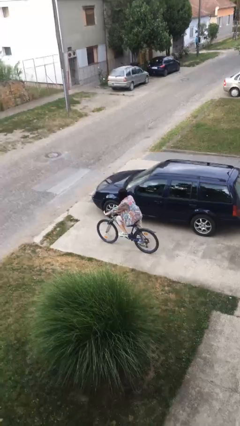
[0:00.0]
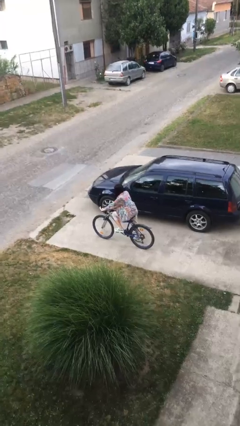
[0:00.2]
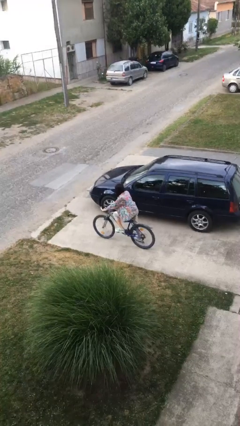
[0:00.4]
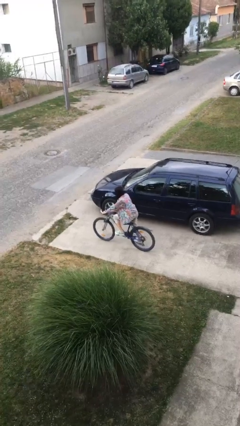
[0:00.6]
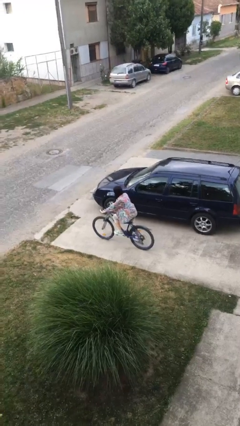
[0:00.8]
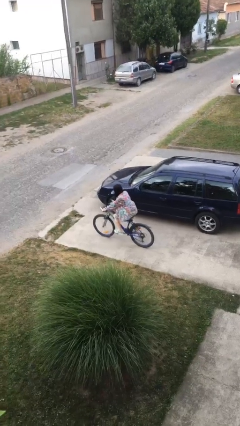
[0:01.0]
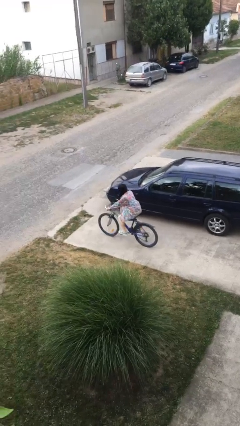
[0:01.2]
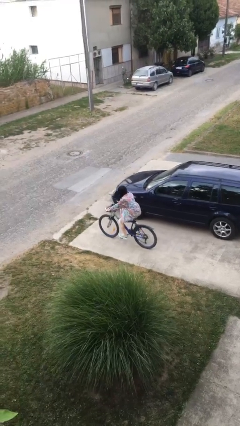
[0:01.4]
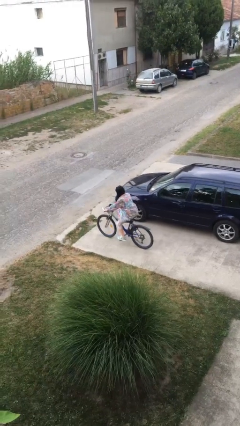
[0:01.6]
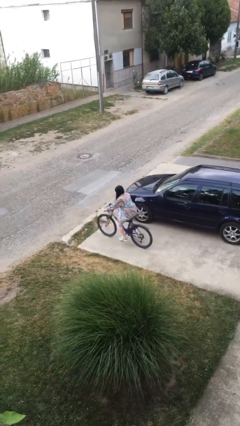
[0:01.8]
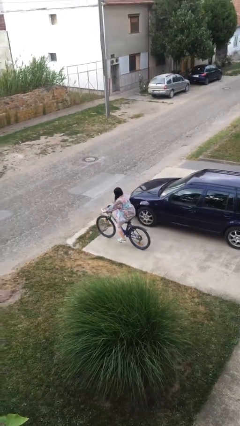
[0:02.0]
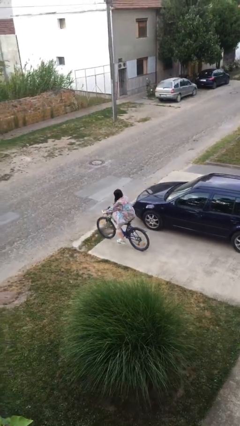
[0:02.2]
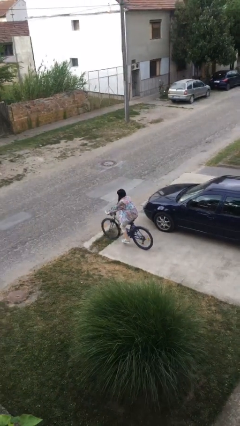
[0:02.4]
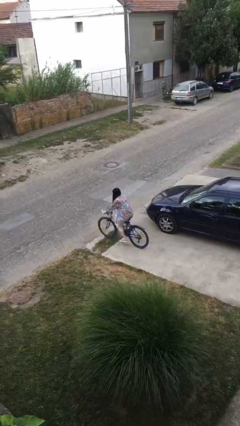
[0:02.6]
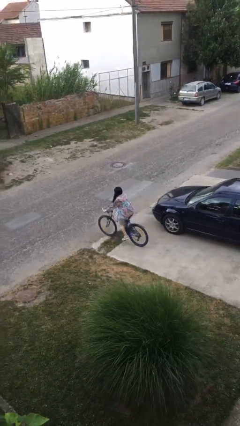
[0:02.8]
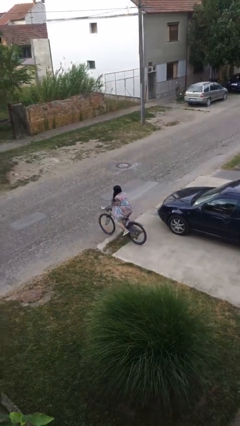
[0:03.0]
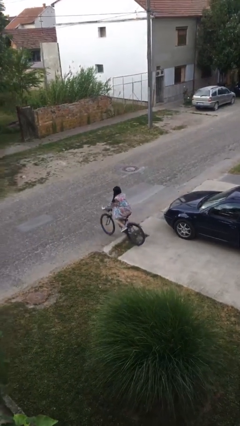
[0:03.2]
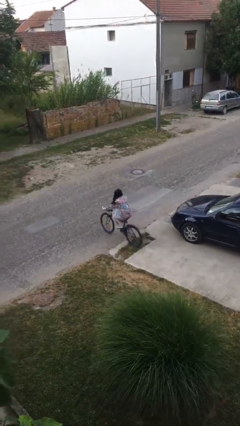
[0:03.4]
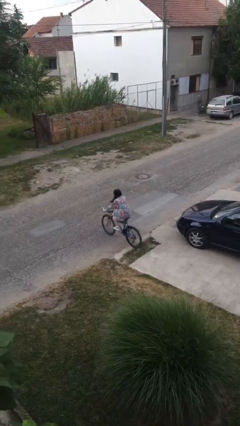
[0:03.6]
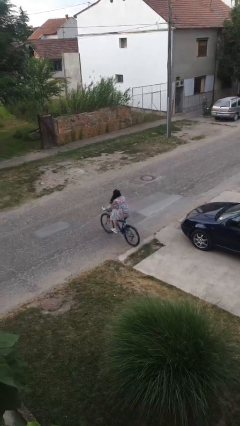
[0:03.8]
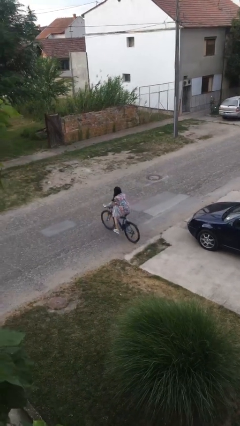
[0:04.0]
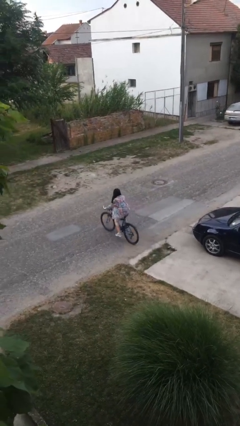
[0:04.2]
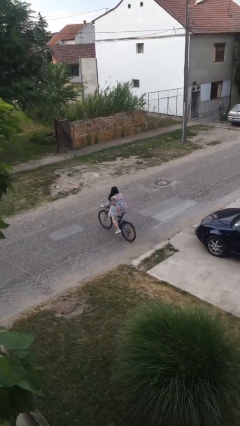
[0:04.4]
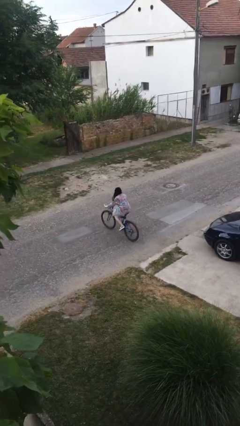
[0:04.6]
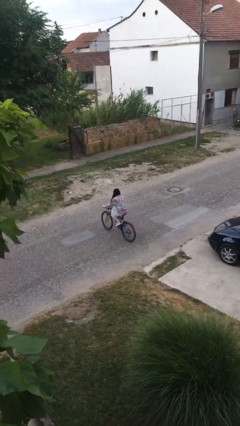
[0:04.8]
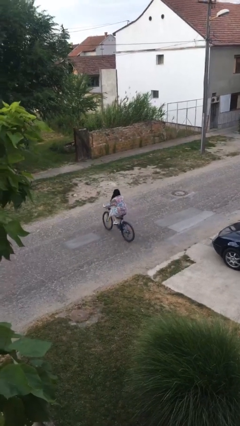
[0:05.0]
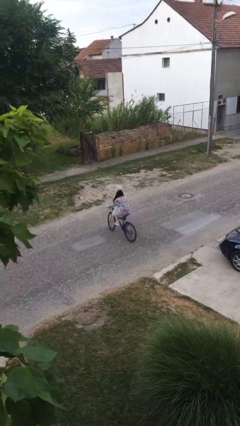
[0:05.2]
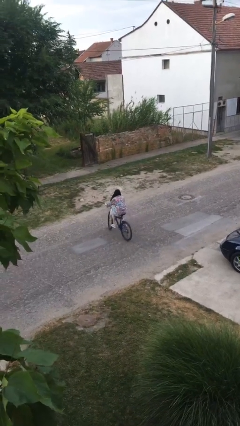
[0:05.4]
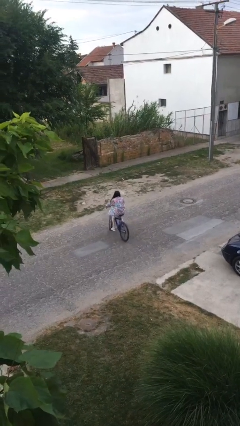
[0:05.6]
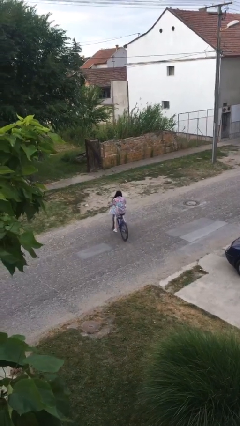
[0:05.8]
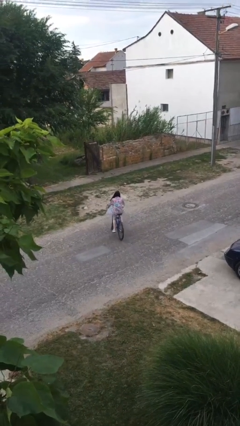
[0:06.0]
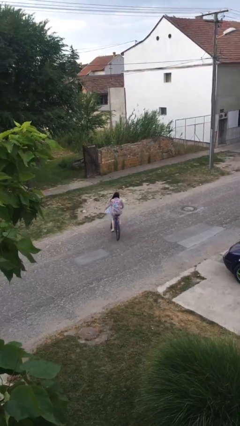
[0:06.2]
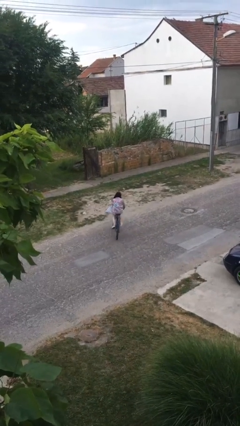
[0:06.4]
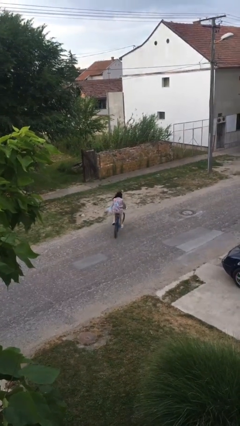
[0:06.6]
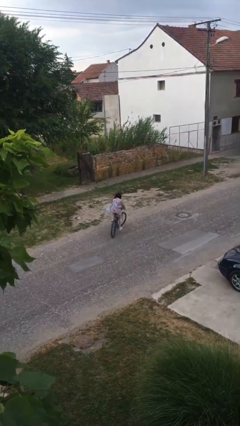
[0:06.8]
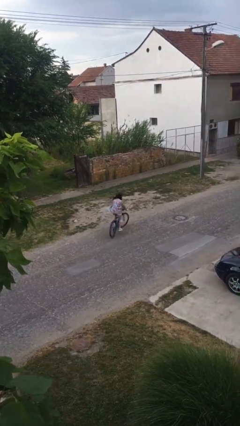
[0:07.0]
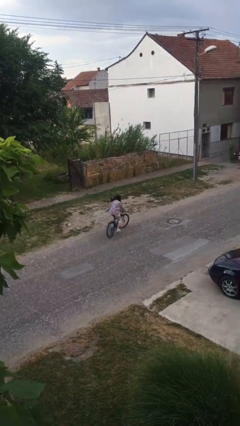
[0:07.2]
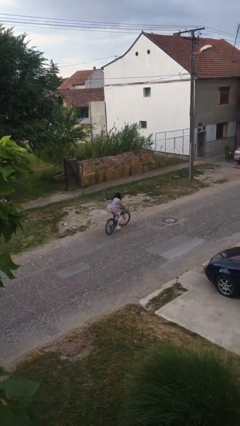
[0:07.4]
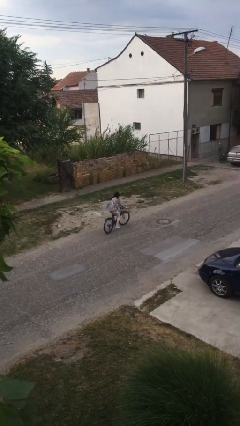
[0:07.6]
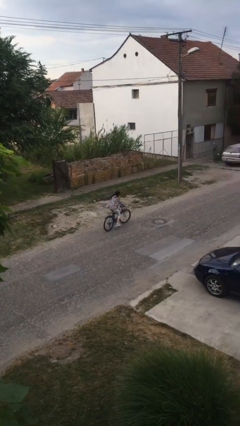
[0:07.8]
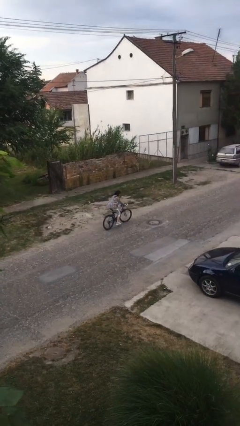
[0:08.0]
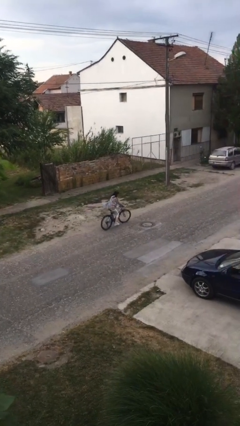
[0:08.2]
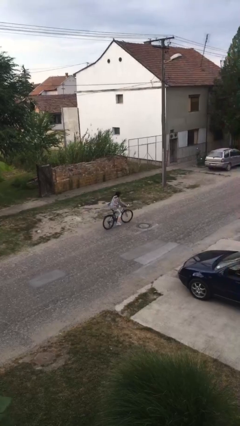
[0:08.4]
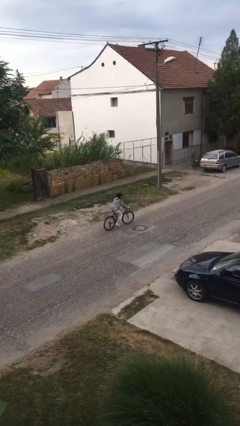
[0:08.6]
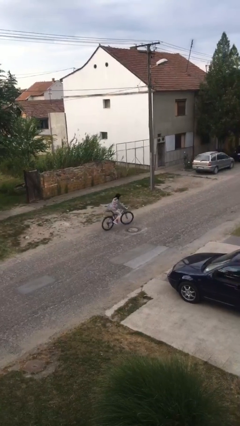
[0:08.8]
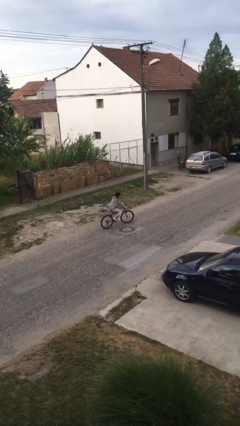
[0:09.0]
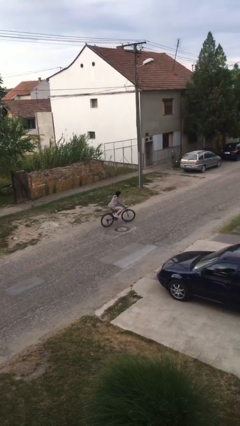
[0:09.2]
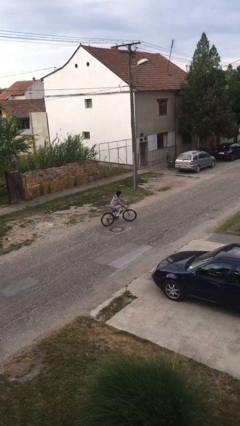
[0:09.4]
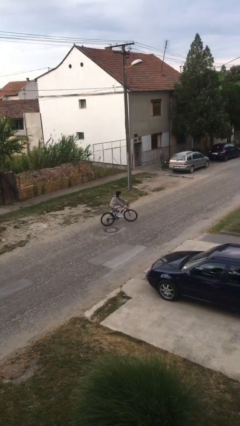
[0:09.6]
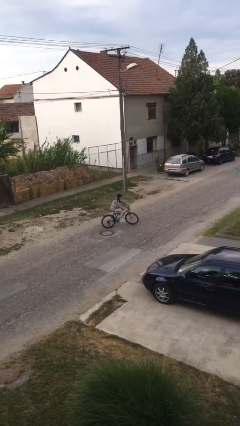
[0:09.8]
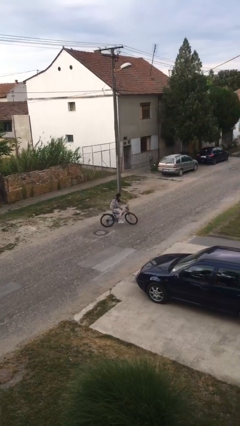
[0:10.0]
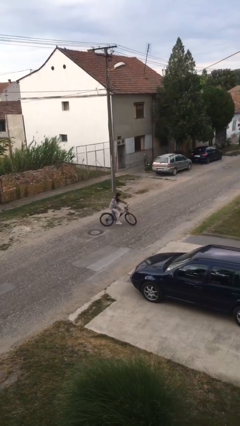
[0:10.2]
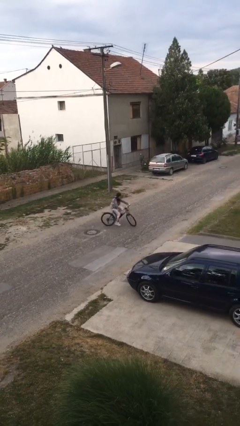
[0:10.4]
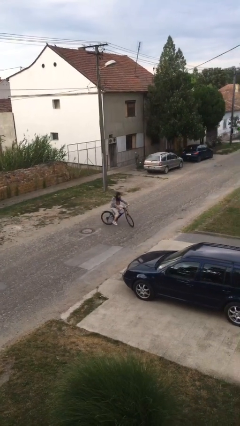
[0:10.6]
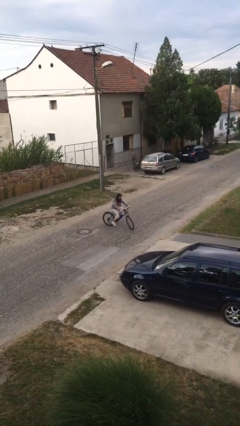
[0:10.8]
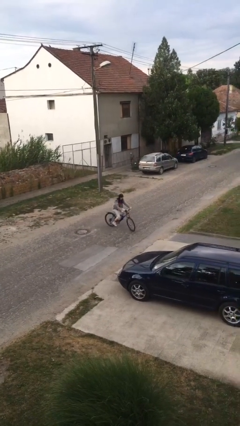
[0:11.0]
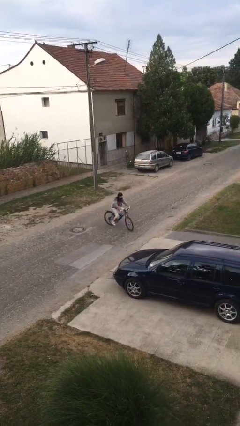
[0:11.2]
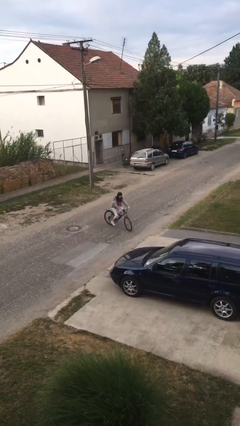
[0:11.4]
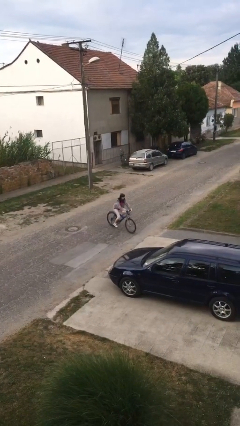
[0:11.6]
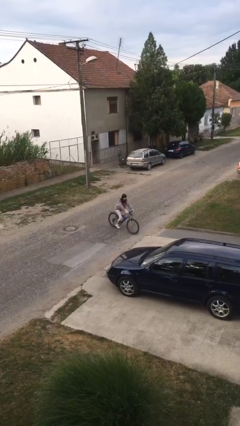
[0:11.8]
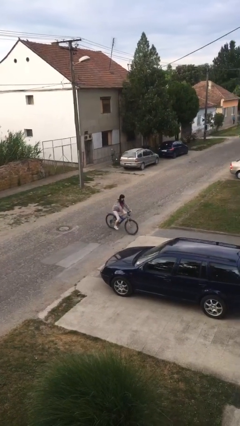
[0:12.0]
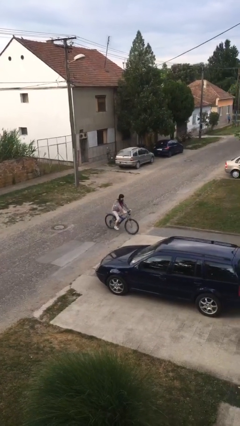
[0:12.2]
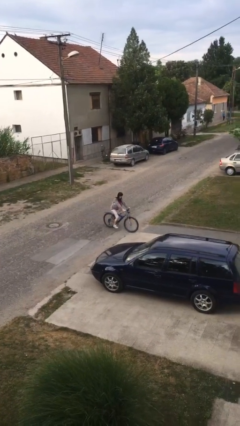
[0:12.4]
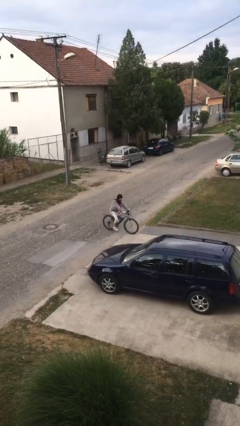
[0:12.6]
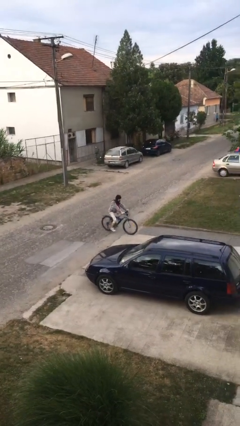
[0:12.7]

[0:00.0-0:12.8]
person rides bicycle

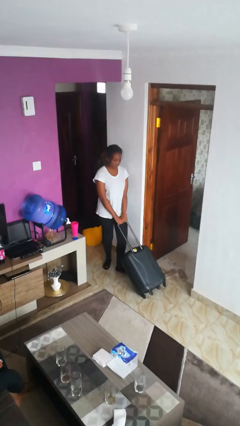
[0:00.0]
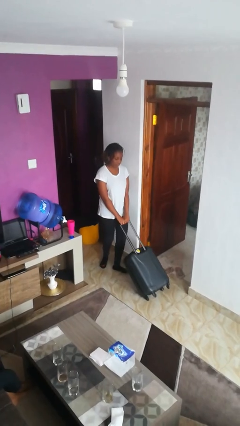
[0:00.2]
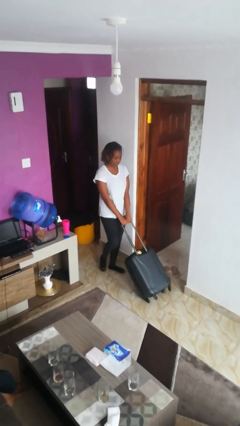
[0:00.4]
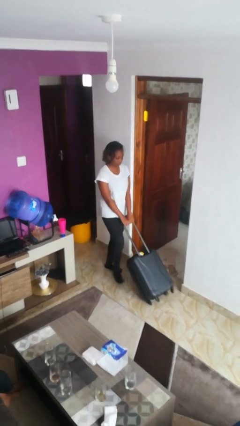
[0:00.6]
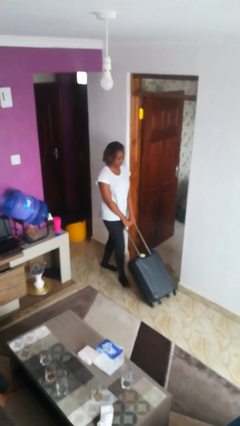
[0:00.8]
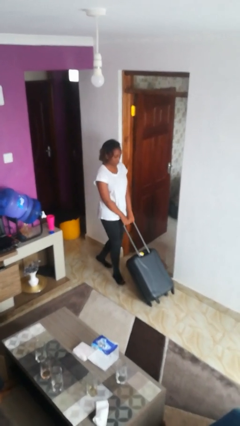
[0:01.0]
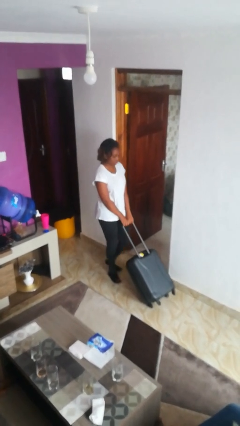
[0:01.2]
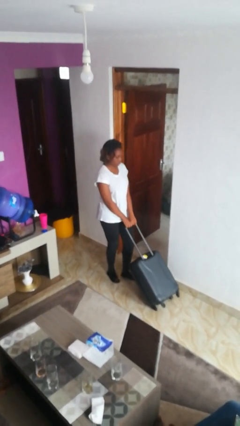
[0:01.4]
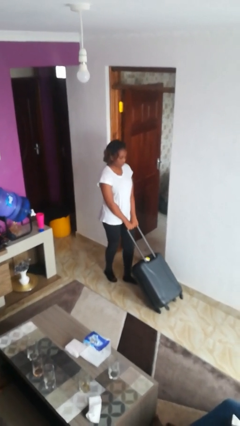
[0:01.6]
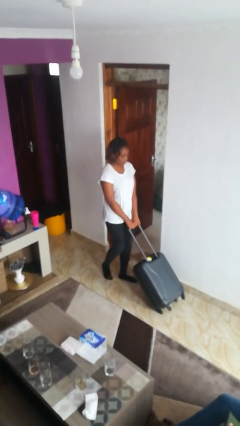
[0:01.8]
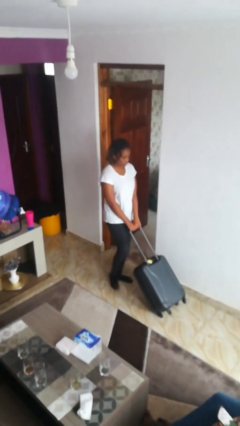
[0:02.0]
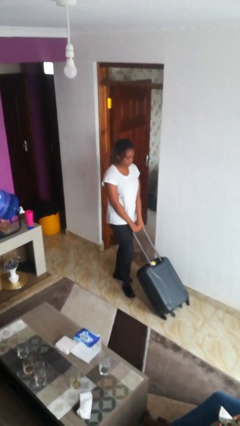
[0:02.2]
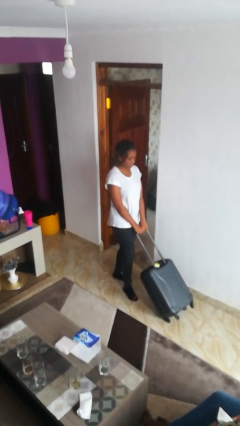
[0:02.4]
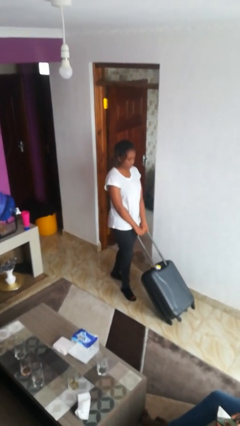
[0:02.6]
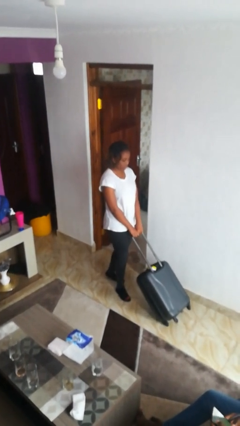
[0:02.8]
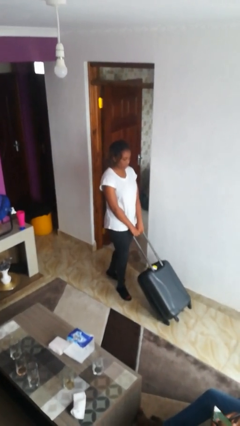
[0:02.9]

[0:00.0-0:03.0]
person pushes wheeled cart

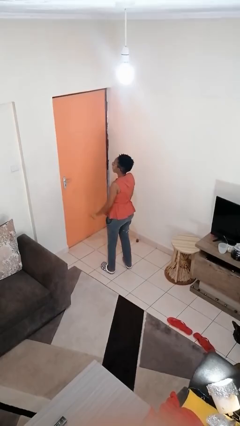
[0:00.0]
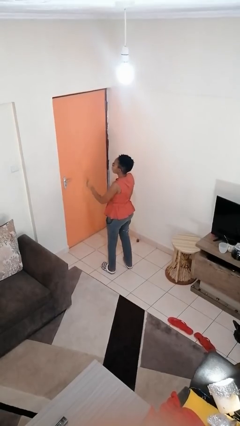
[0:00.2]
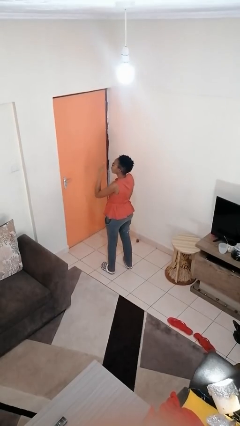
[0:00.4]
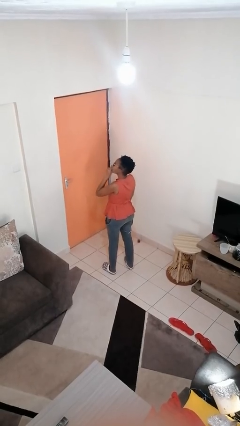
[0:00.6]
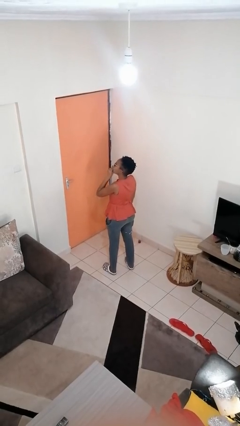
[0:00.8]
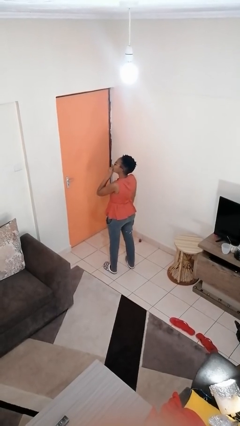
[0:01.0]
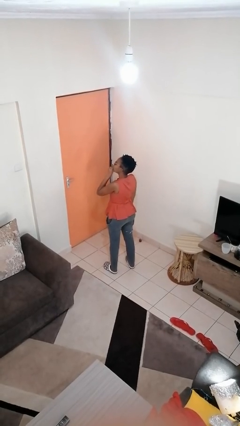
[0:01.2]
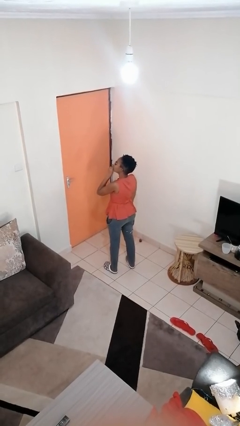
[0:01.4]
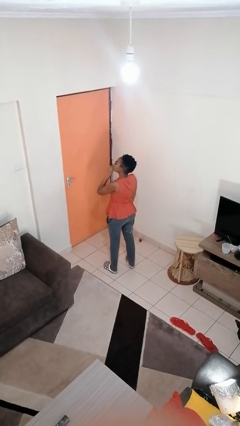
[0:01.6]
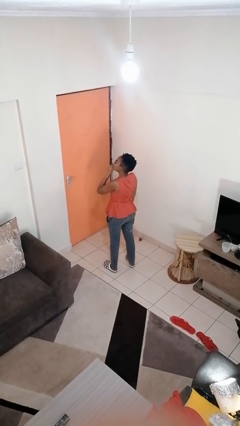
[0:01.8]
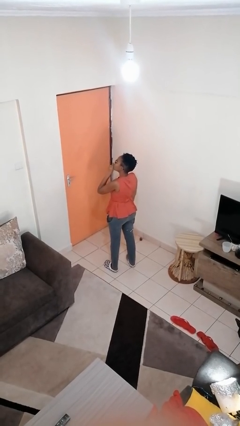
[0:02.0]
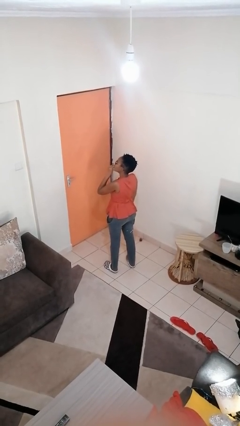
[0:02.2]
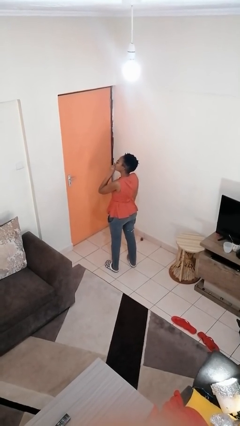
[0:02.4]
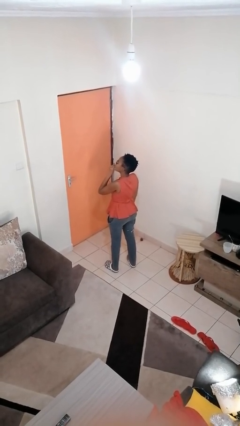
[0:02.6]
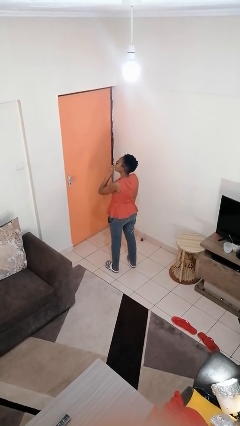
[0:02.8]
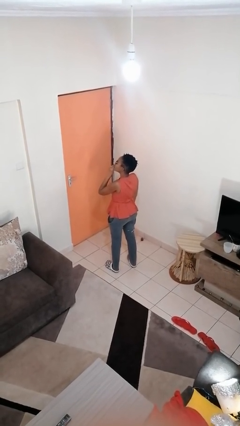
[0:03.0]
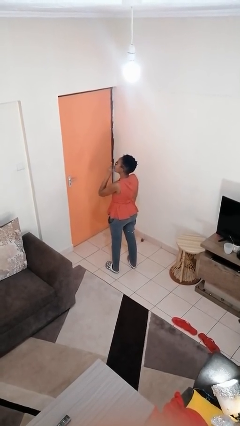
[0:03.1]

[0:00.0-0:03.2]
person gestures be quiet
